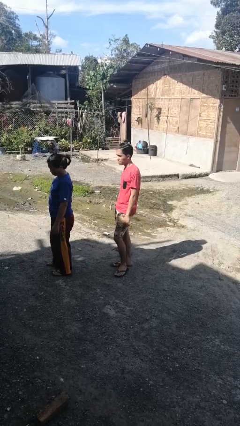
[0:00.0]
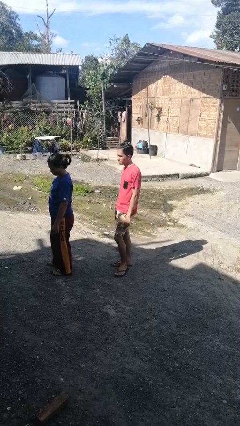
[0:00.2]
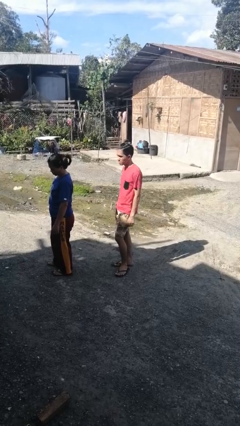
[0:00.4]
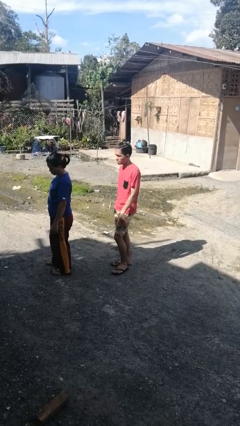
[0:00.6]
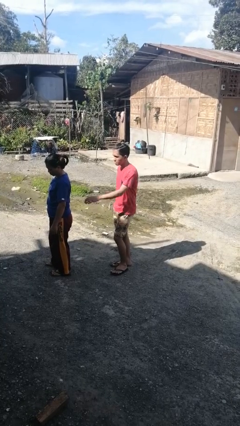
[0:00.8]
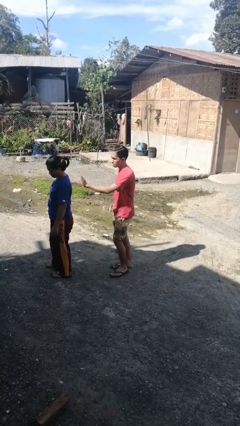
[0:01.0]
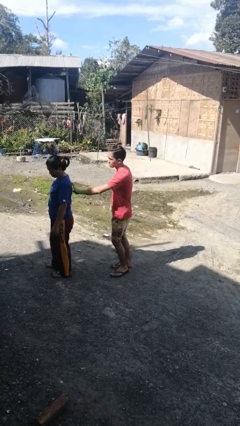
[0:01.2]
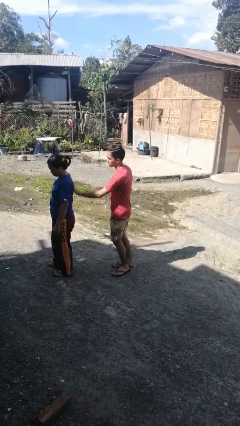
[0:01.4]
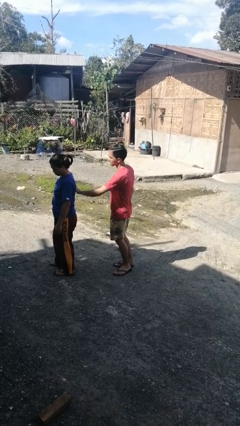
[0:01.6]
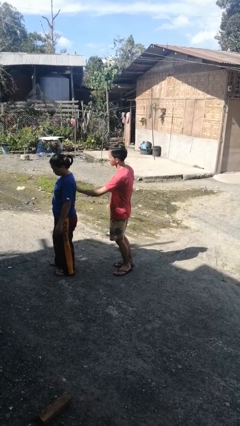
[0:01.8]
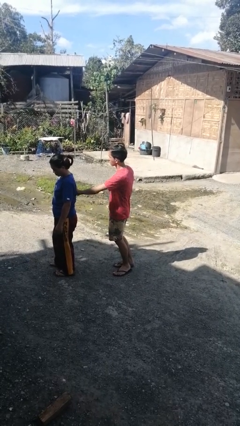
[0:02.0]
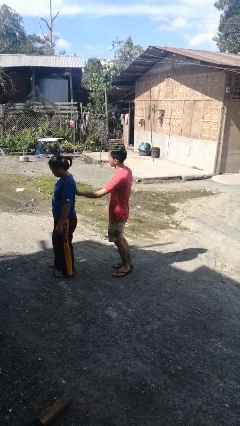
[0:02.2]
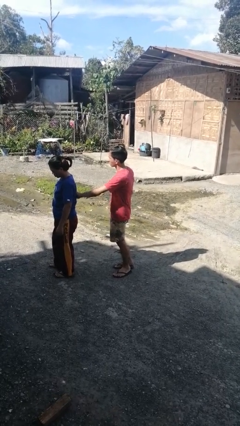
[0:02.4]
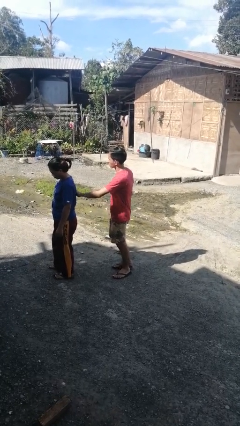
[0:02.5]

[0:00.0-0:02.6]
person touches back of person

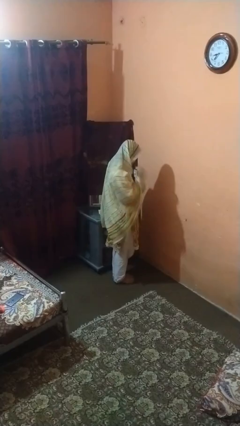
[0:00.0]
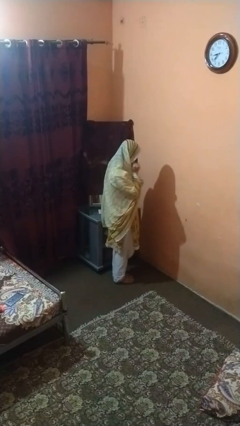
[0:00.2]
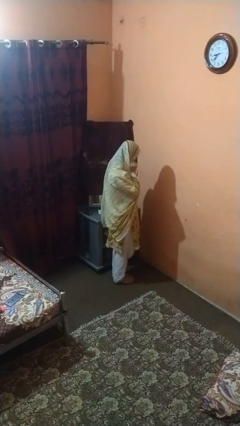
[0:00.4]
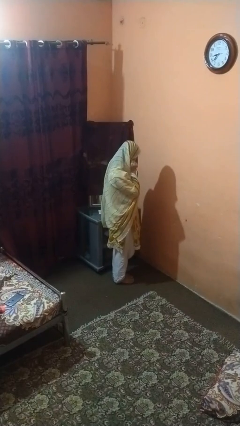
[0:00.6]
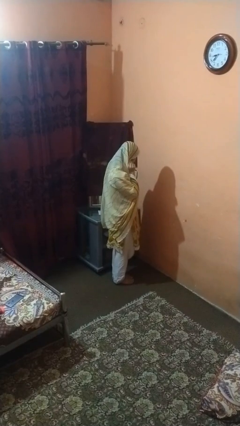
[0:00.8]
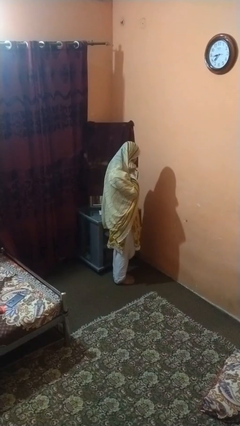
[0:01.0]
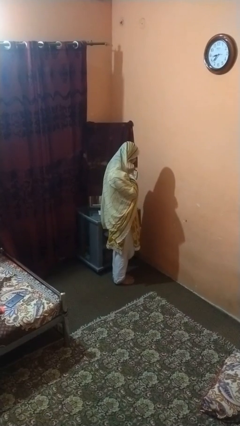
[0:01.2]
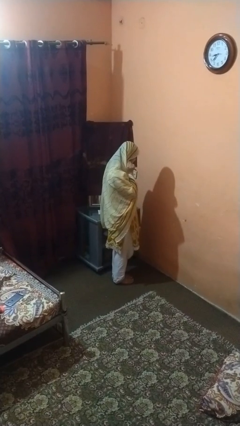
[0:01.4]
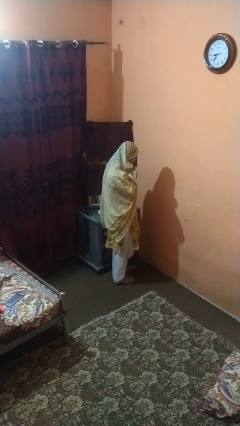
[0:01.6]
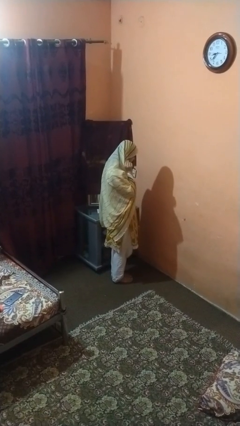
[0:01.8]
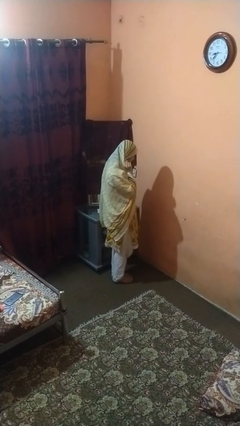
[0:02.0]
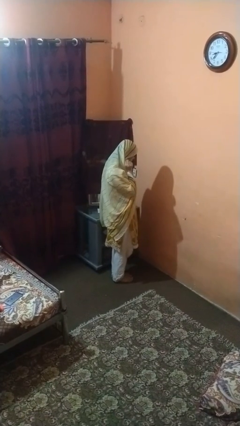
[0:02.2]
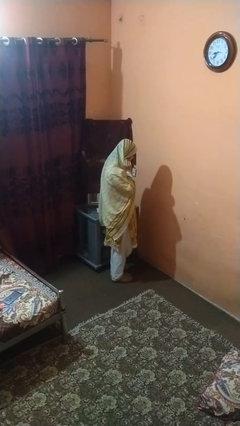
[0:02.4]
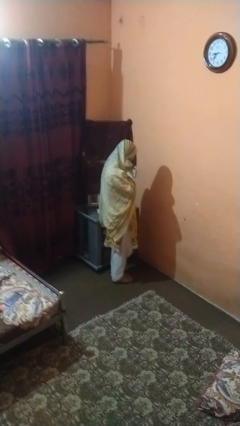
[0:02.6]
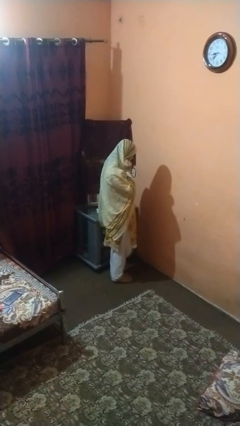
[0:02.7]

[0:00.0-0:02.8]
person touches earlobe

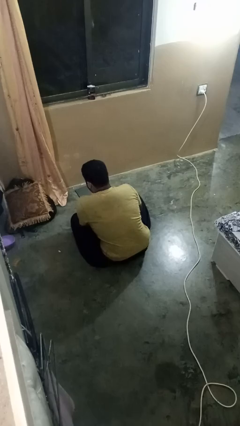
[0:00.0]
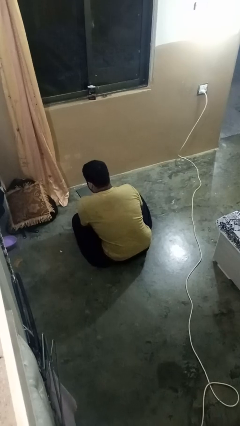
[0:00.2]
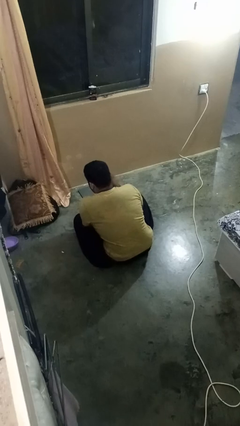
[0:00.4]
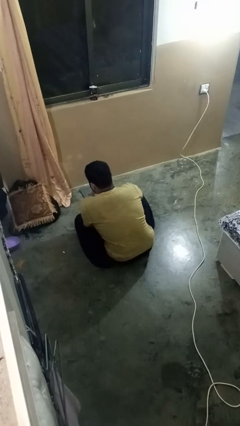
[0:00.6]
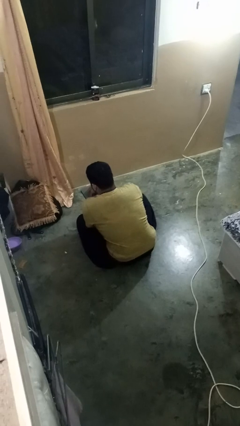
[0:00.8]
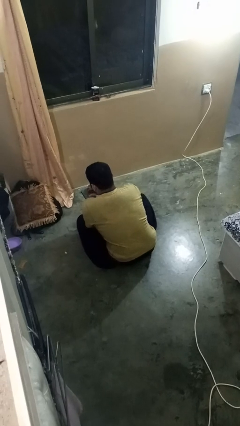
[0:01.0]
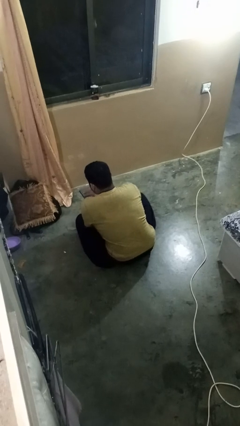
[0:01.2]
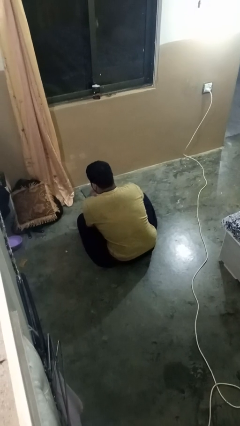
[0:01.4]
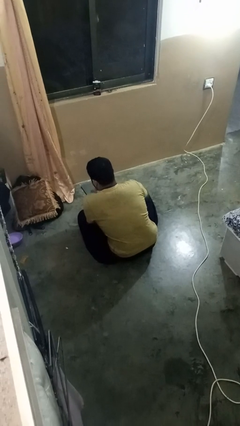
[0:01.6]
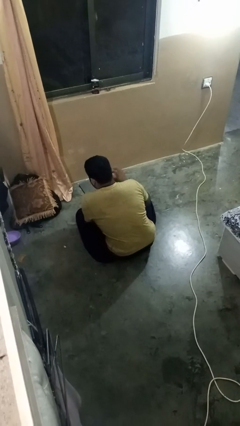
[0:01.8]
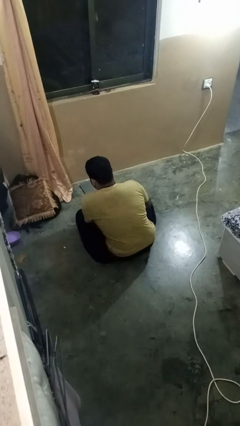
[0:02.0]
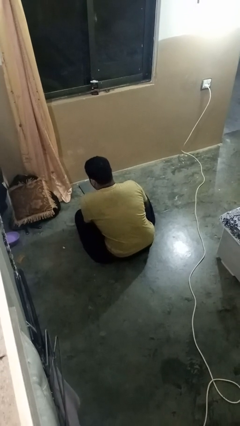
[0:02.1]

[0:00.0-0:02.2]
person interacts with tablet

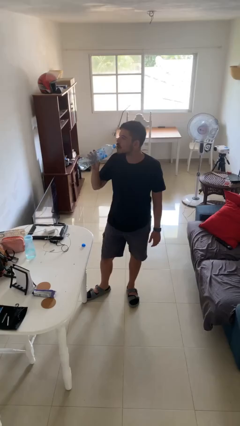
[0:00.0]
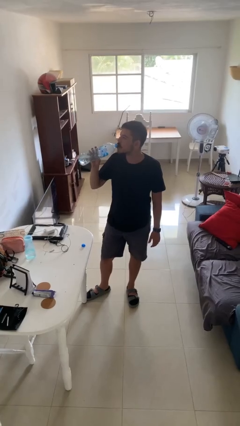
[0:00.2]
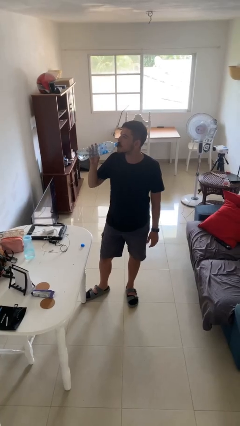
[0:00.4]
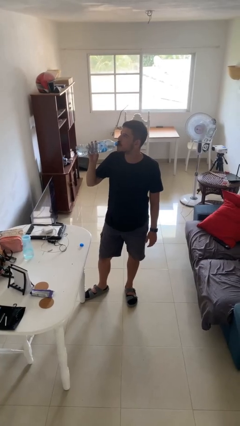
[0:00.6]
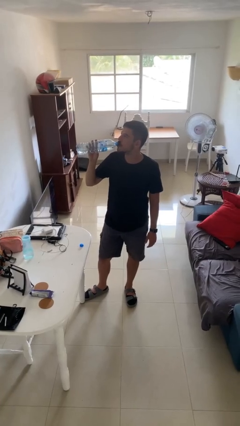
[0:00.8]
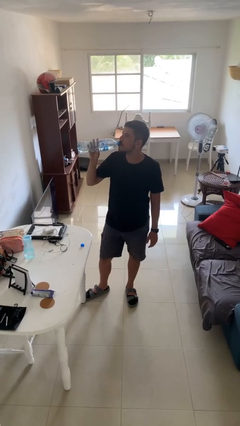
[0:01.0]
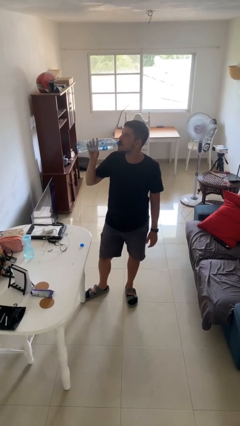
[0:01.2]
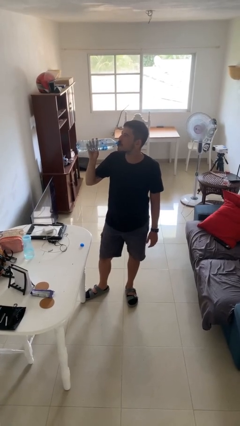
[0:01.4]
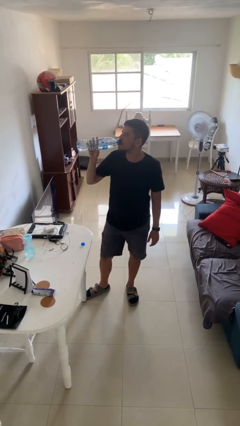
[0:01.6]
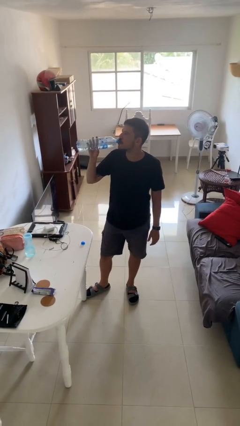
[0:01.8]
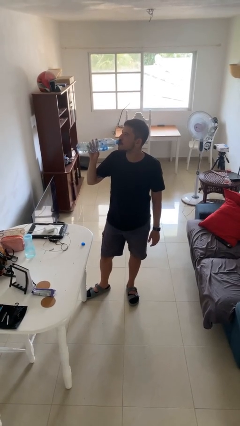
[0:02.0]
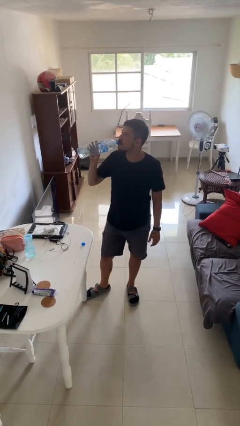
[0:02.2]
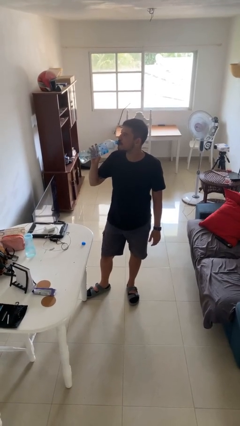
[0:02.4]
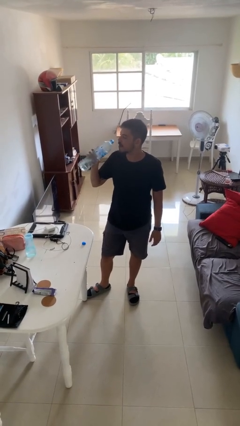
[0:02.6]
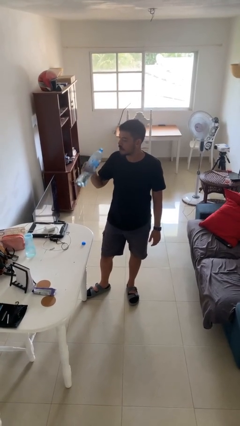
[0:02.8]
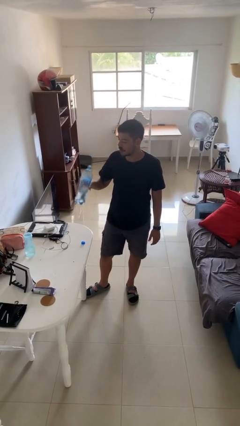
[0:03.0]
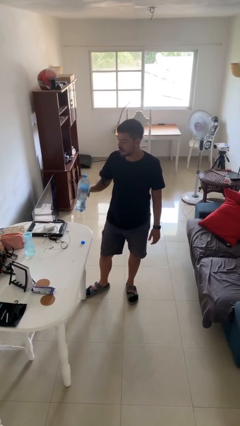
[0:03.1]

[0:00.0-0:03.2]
person drinks from bottle

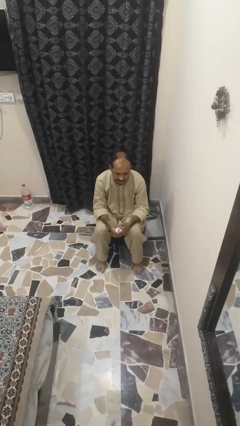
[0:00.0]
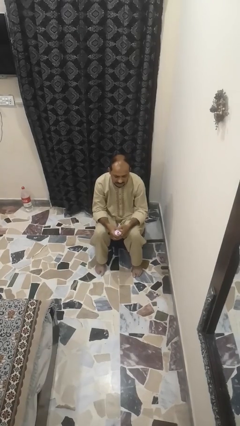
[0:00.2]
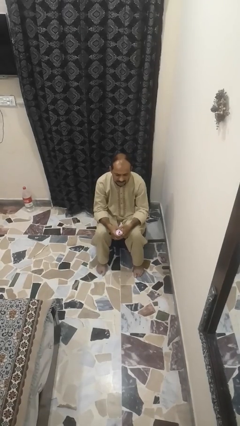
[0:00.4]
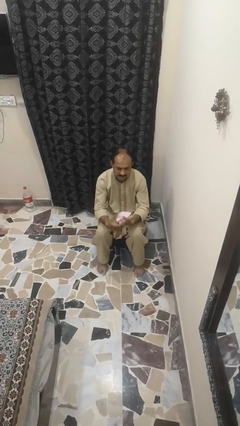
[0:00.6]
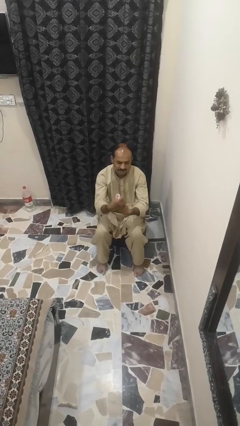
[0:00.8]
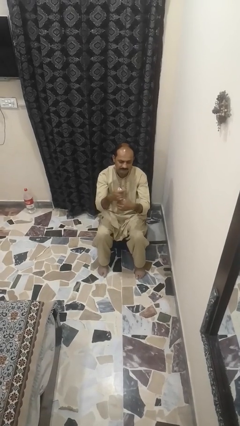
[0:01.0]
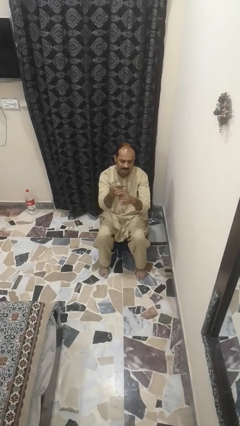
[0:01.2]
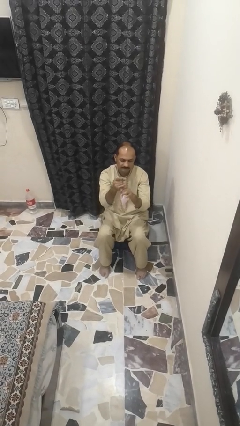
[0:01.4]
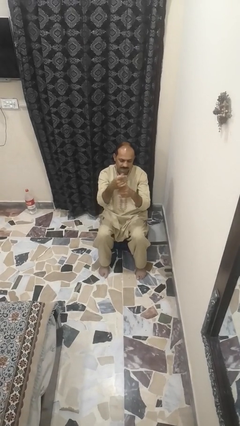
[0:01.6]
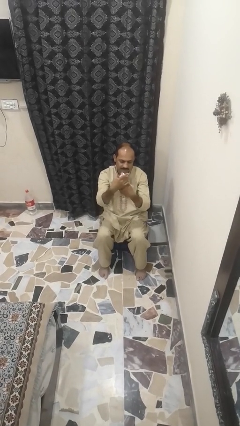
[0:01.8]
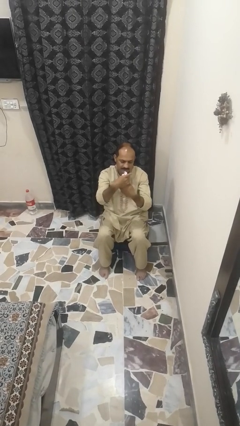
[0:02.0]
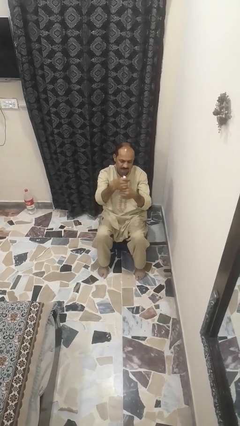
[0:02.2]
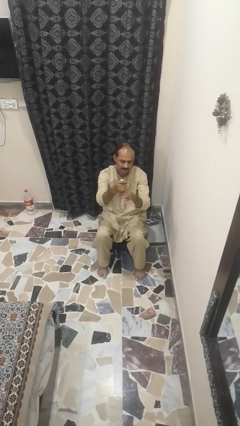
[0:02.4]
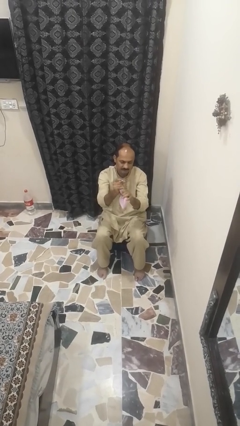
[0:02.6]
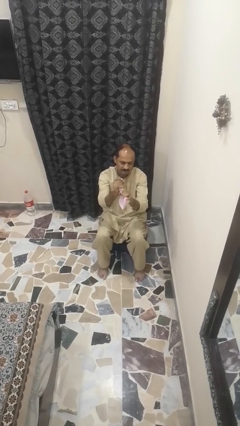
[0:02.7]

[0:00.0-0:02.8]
person squeezes object

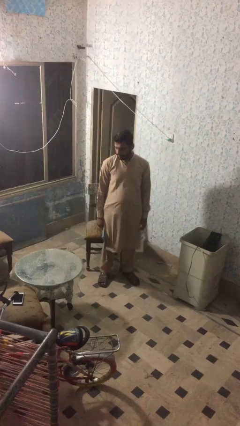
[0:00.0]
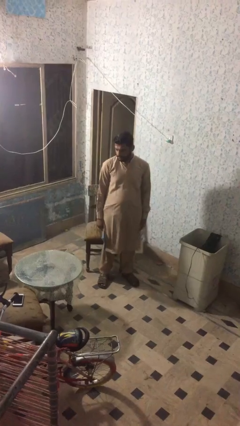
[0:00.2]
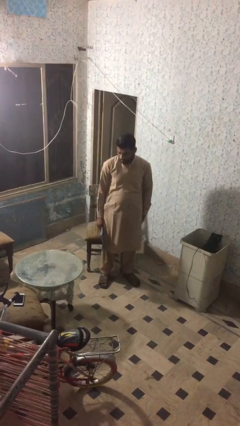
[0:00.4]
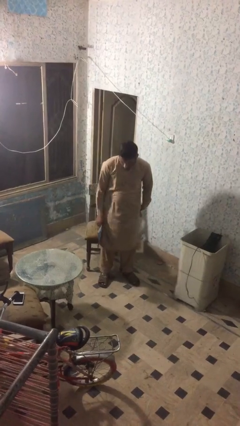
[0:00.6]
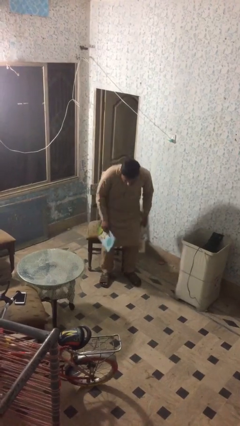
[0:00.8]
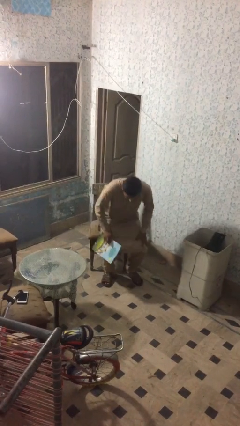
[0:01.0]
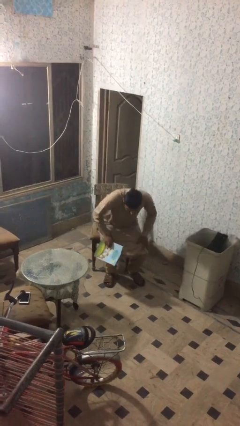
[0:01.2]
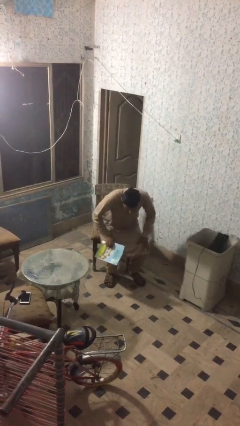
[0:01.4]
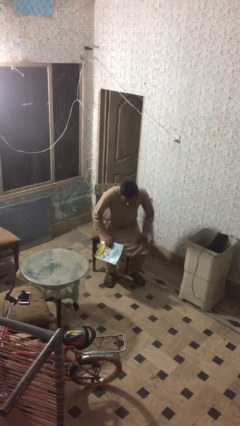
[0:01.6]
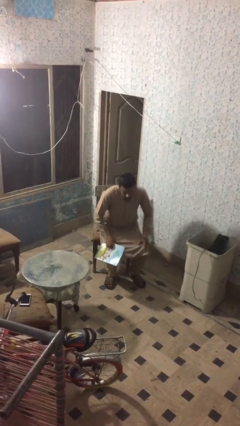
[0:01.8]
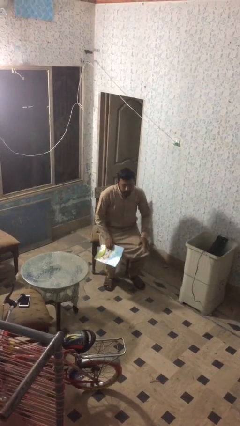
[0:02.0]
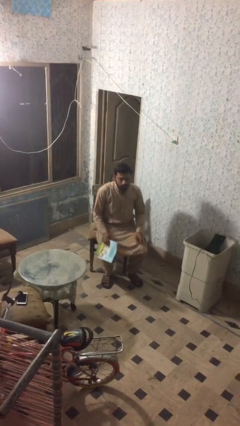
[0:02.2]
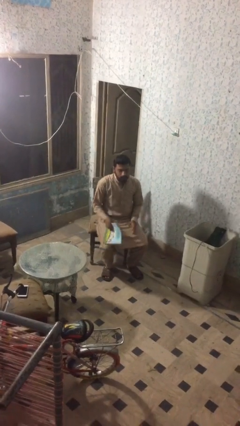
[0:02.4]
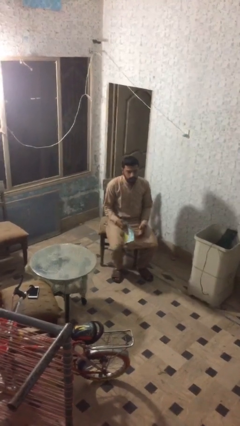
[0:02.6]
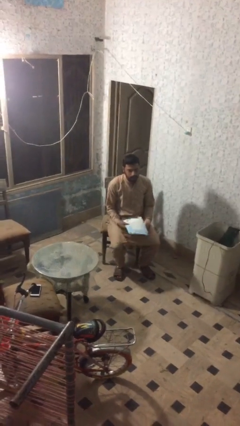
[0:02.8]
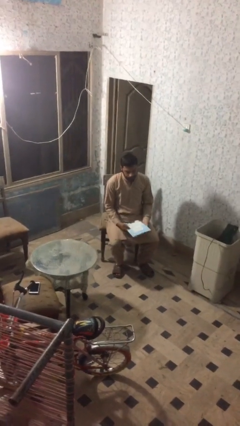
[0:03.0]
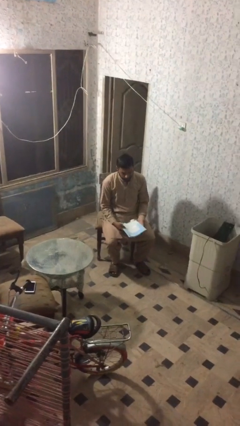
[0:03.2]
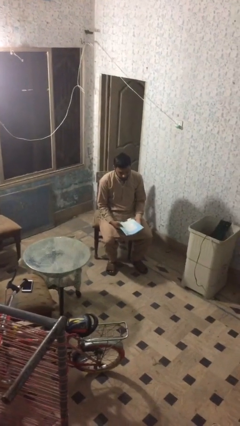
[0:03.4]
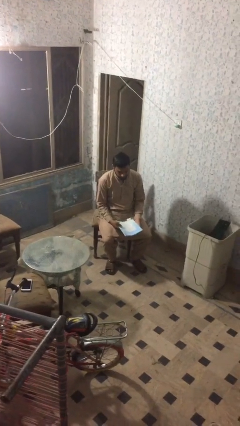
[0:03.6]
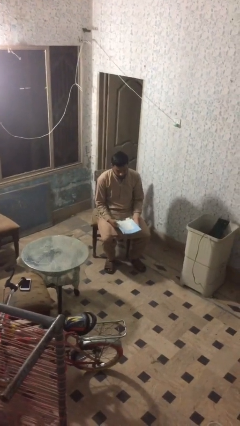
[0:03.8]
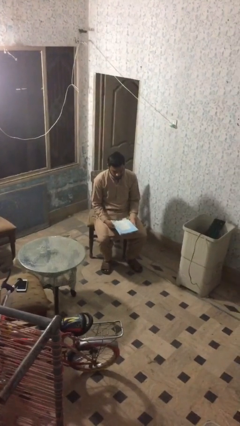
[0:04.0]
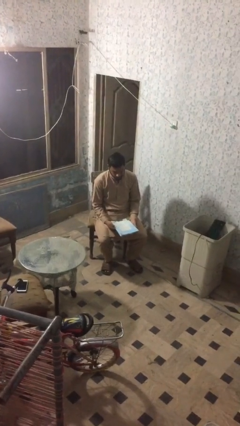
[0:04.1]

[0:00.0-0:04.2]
person sits down
